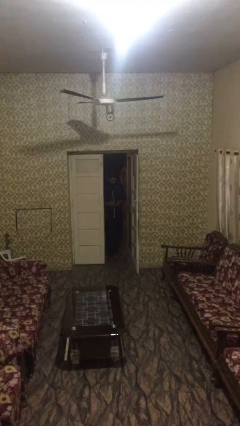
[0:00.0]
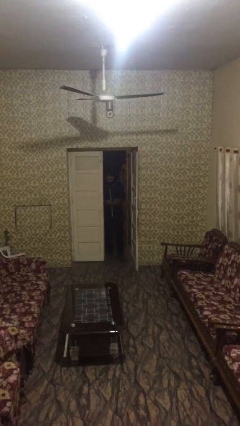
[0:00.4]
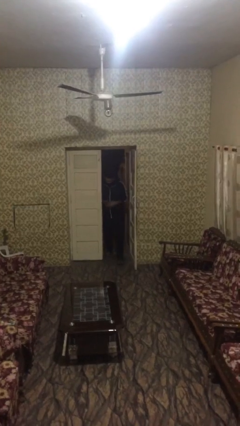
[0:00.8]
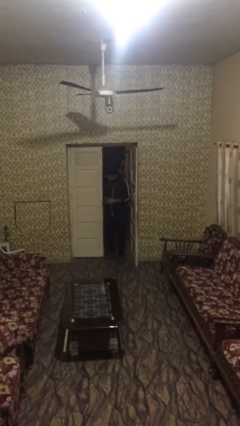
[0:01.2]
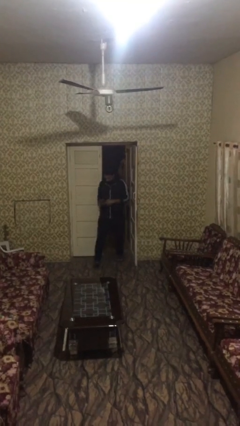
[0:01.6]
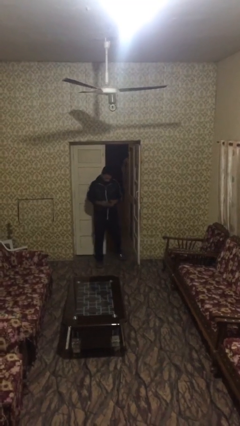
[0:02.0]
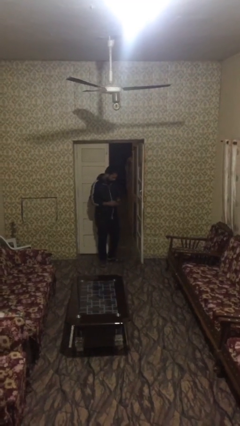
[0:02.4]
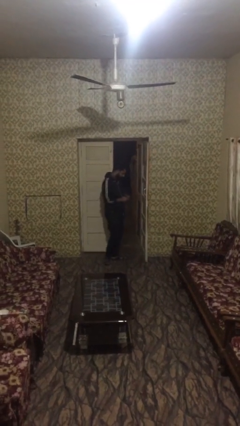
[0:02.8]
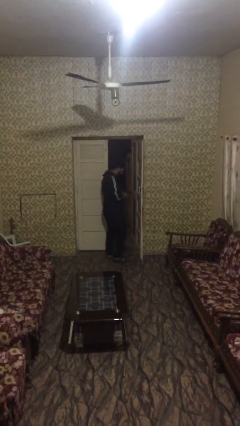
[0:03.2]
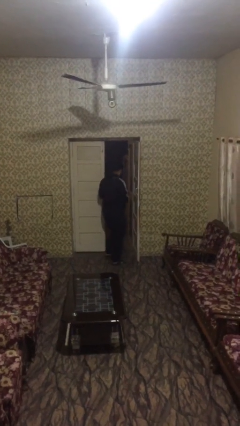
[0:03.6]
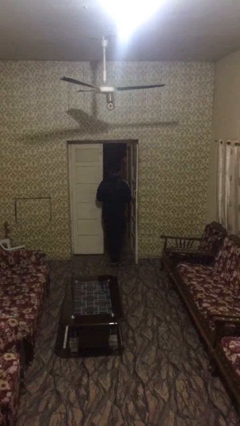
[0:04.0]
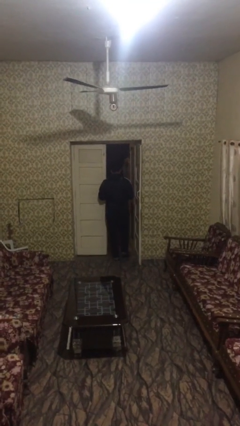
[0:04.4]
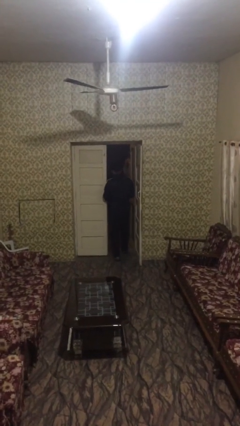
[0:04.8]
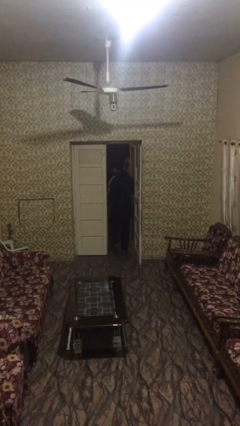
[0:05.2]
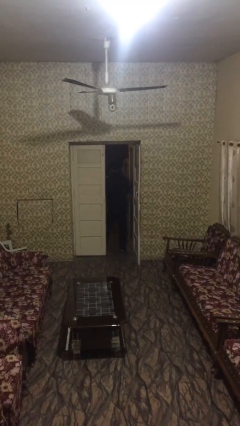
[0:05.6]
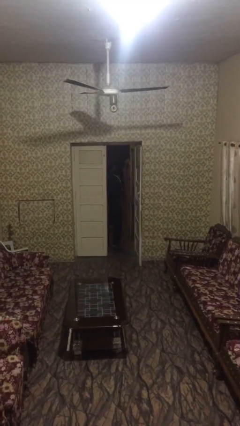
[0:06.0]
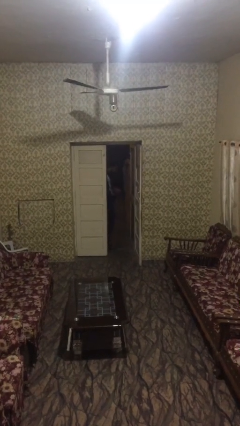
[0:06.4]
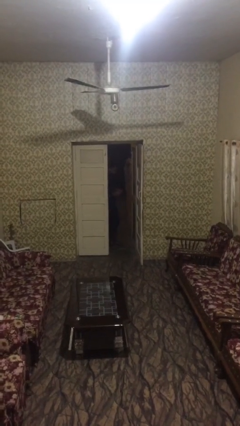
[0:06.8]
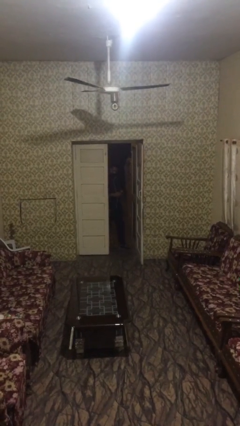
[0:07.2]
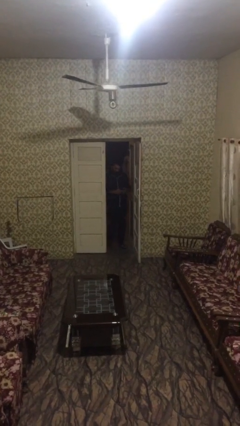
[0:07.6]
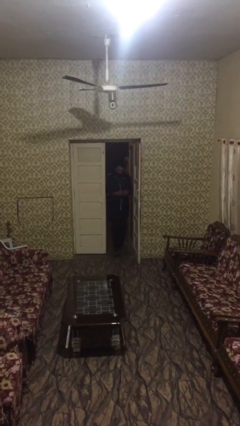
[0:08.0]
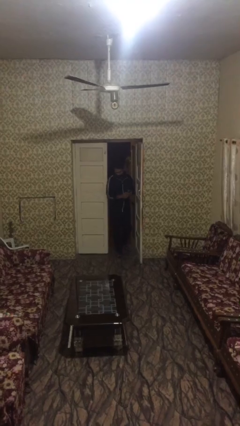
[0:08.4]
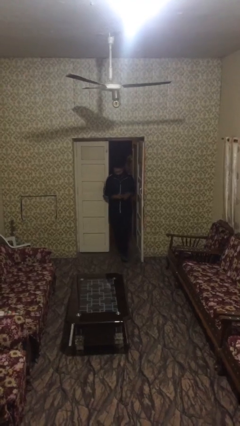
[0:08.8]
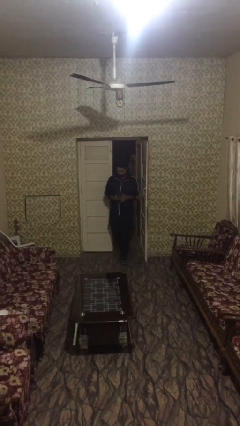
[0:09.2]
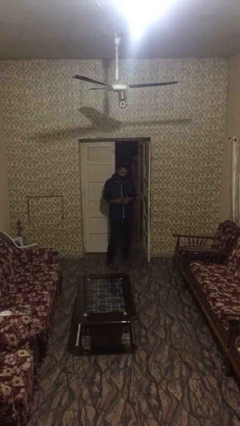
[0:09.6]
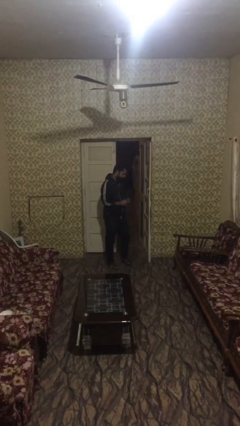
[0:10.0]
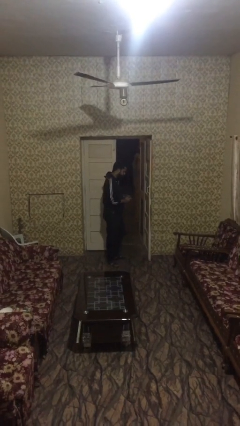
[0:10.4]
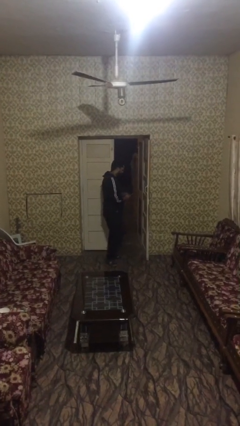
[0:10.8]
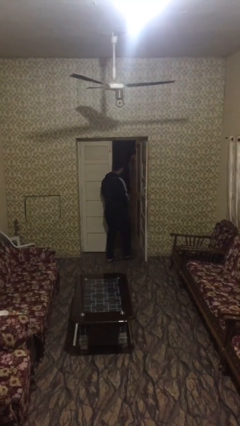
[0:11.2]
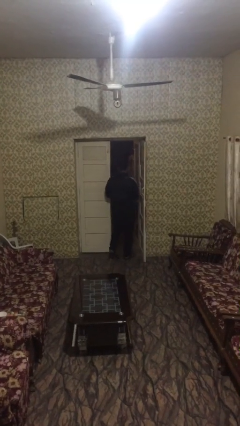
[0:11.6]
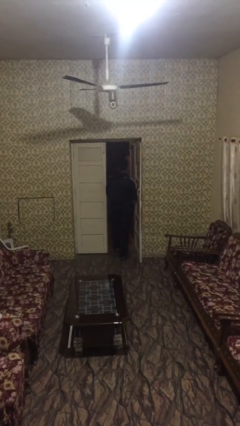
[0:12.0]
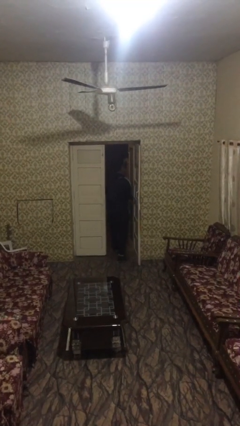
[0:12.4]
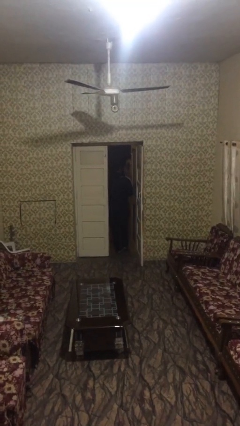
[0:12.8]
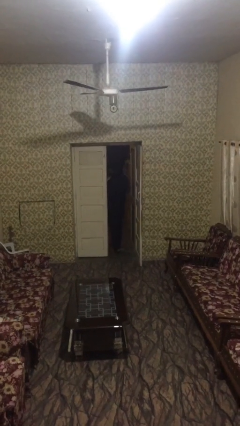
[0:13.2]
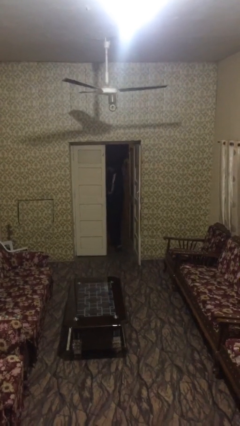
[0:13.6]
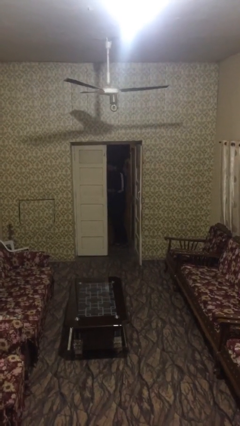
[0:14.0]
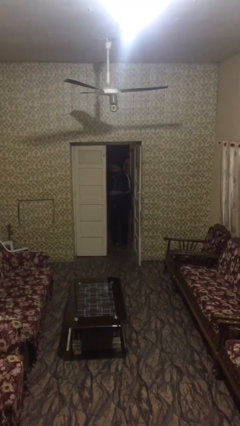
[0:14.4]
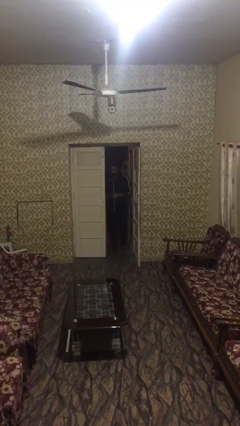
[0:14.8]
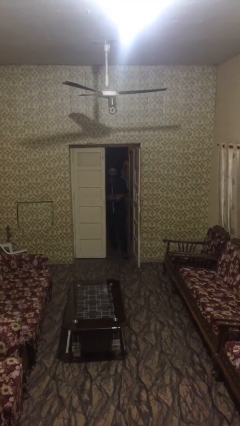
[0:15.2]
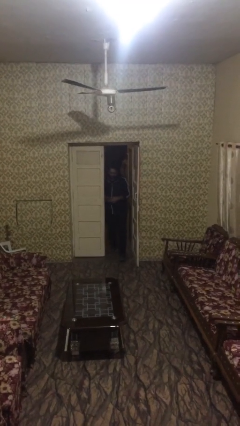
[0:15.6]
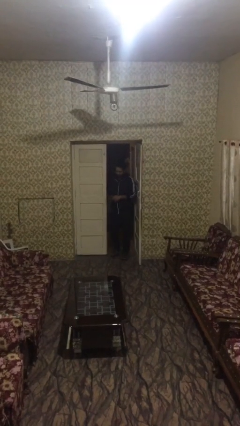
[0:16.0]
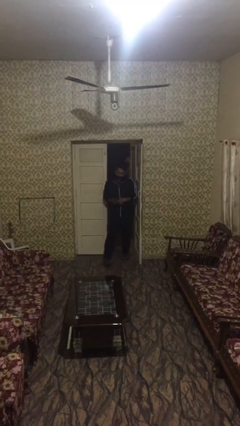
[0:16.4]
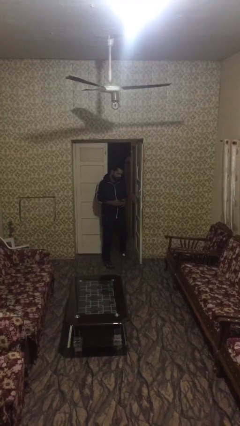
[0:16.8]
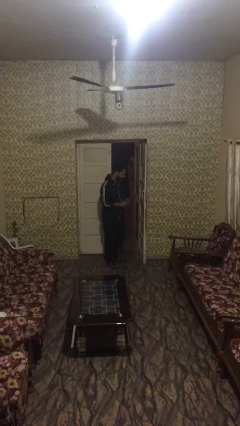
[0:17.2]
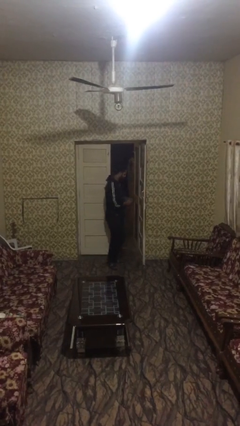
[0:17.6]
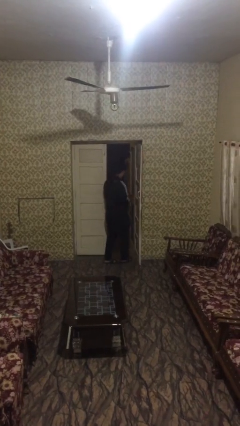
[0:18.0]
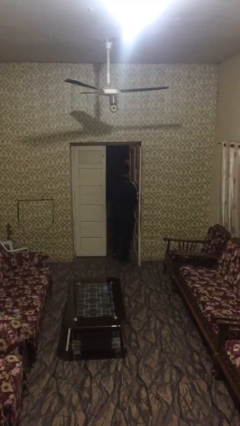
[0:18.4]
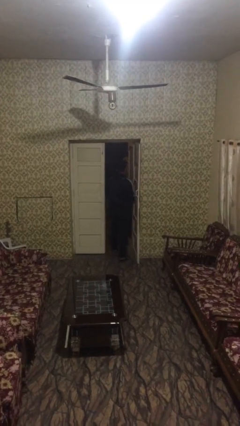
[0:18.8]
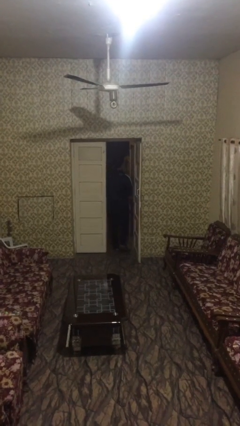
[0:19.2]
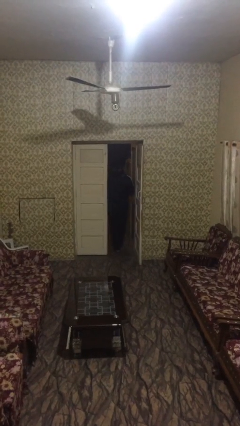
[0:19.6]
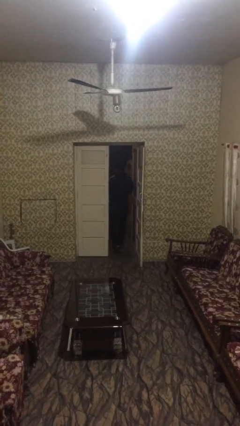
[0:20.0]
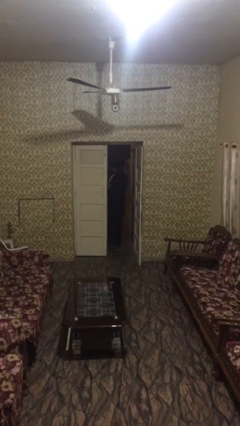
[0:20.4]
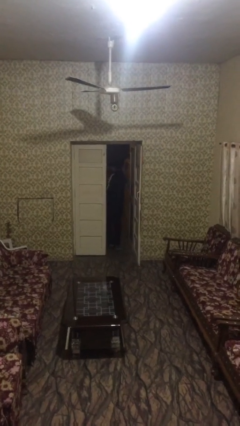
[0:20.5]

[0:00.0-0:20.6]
person texts on phone

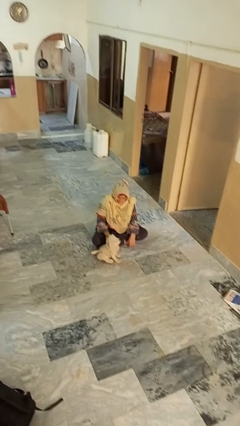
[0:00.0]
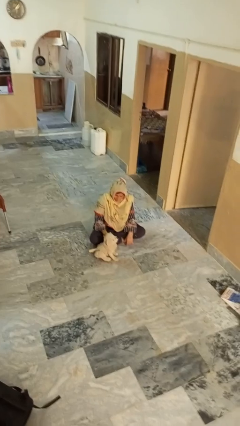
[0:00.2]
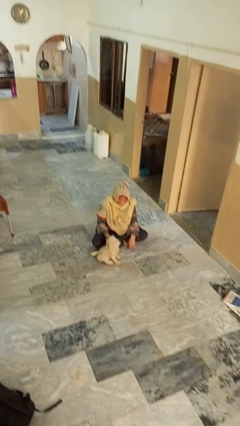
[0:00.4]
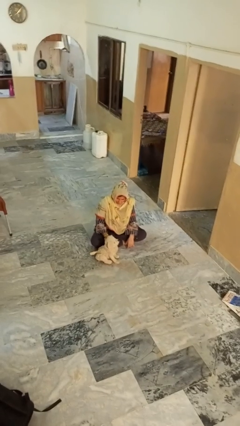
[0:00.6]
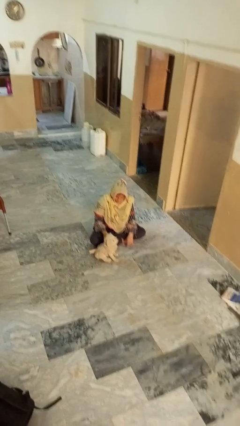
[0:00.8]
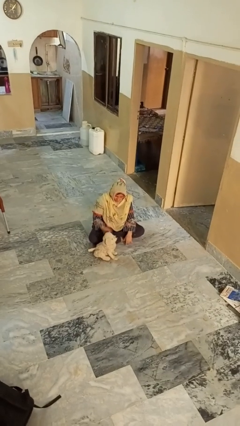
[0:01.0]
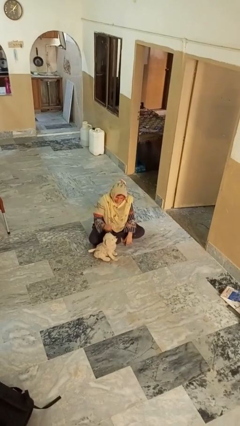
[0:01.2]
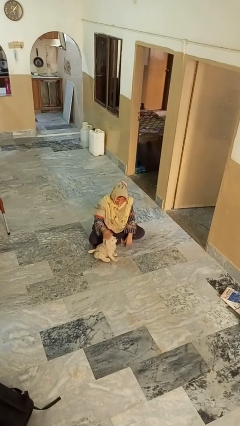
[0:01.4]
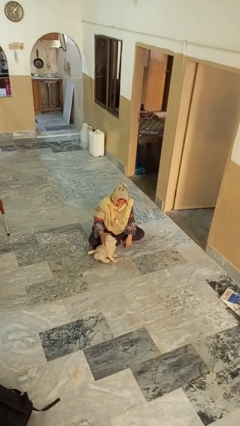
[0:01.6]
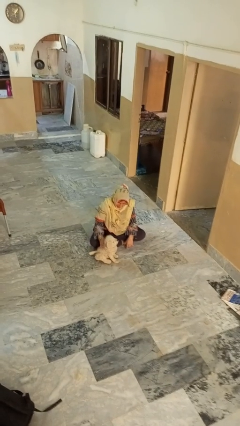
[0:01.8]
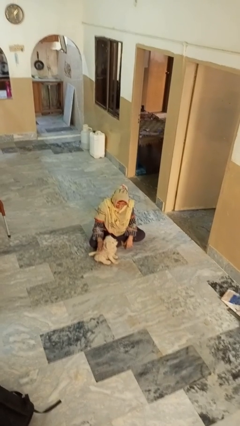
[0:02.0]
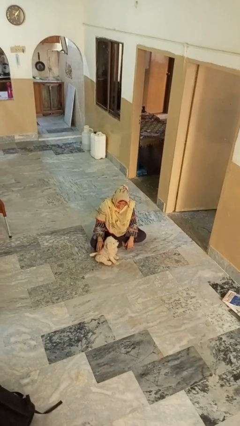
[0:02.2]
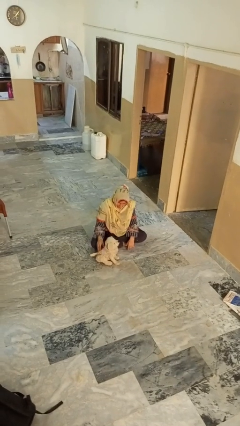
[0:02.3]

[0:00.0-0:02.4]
person pets dog

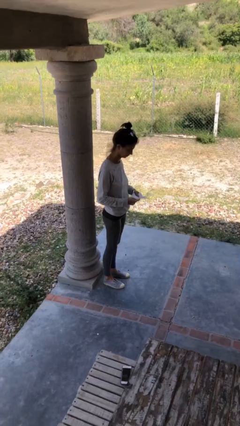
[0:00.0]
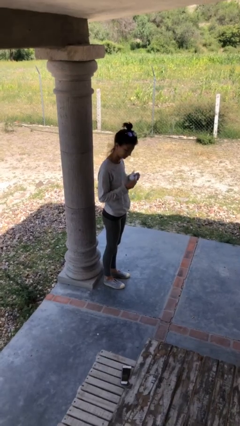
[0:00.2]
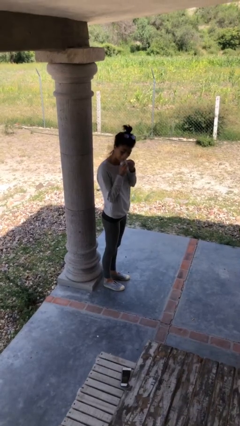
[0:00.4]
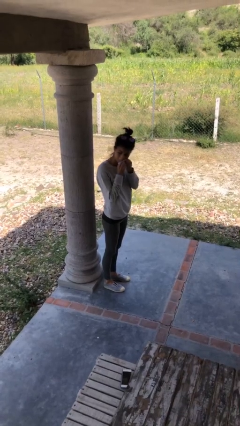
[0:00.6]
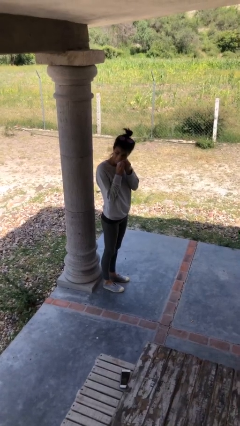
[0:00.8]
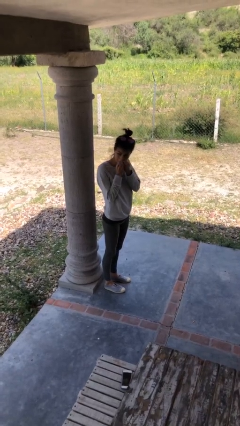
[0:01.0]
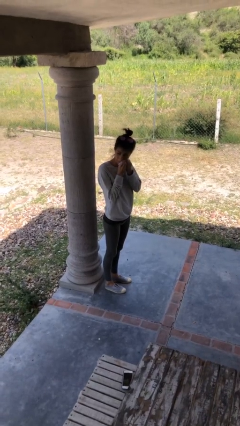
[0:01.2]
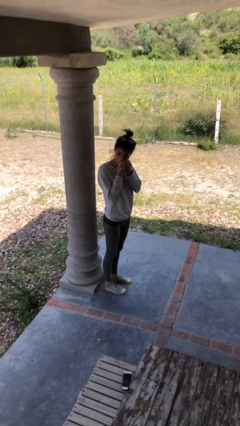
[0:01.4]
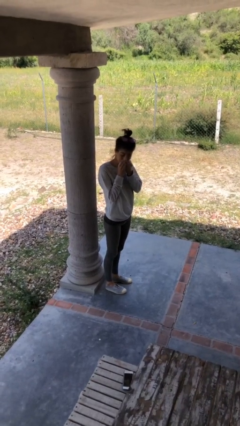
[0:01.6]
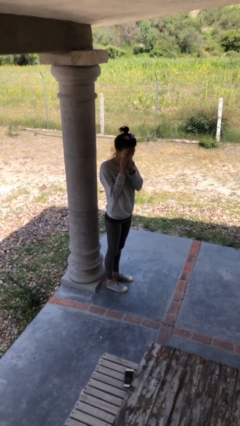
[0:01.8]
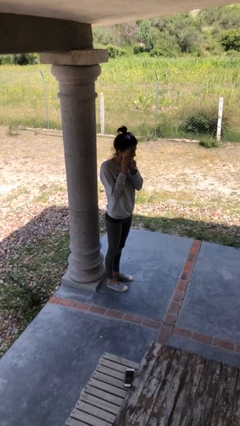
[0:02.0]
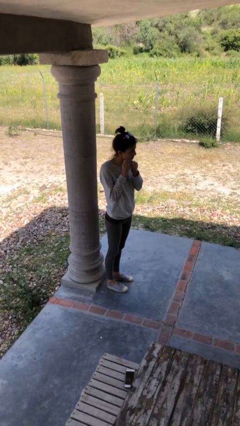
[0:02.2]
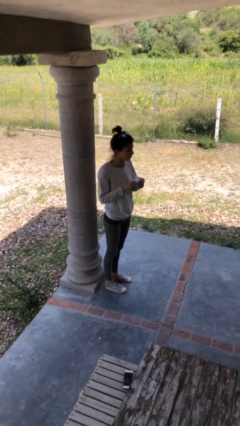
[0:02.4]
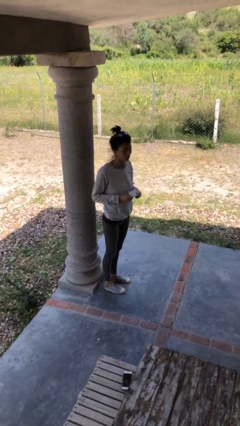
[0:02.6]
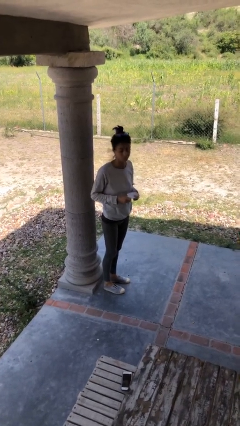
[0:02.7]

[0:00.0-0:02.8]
person wipes mouth with napkin

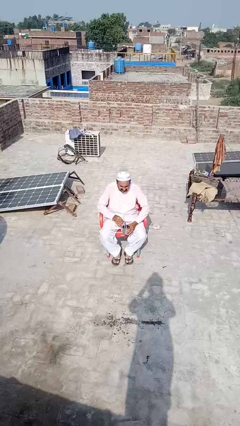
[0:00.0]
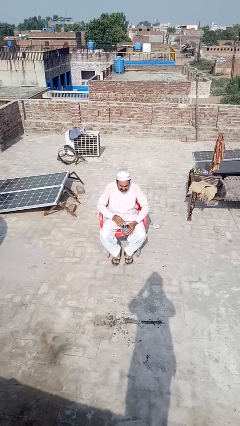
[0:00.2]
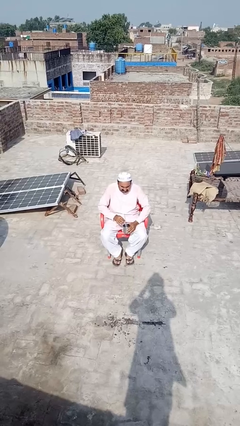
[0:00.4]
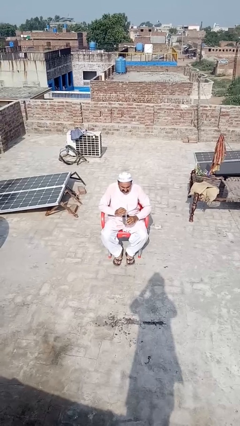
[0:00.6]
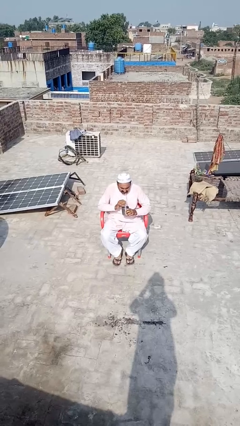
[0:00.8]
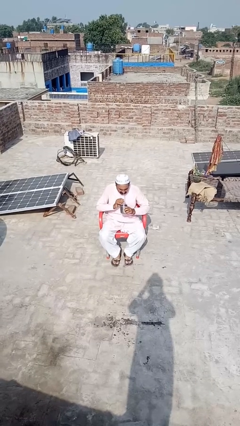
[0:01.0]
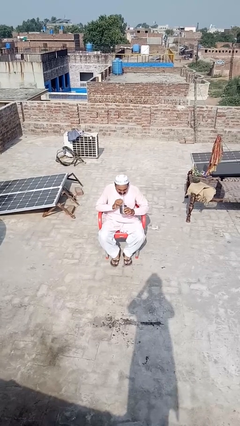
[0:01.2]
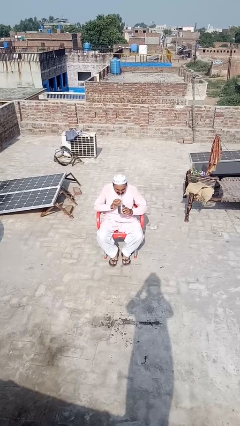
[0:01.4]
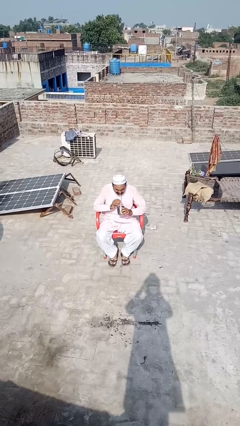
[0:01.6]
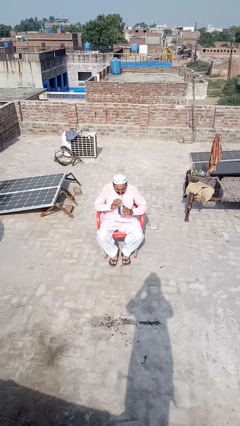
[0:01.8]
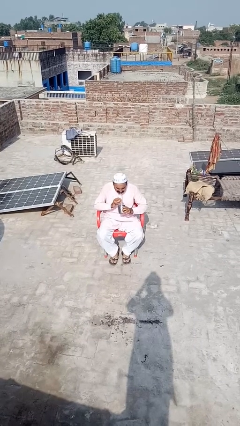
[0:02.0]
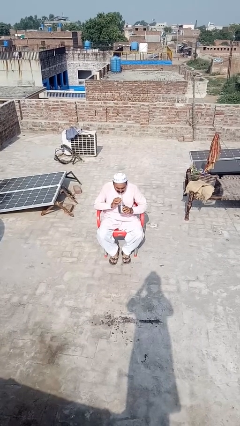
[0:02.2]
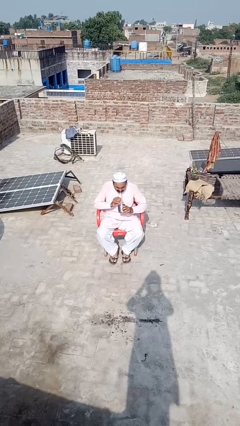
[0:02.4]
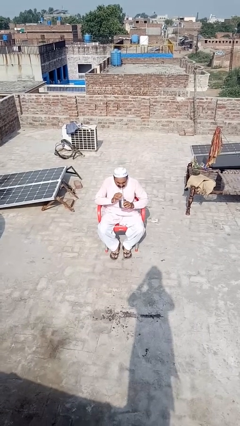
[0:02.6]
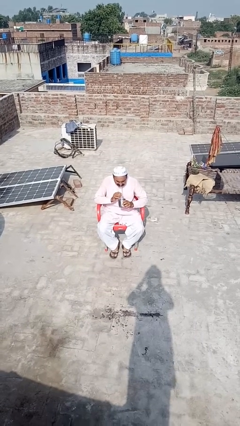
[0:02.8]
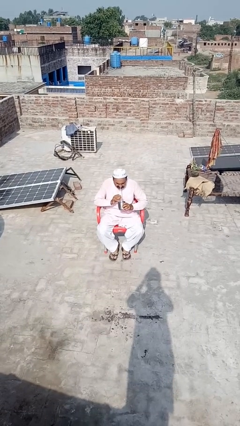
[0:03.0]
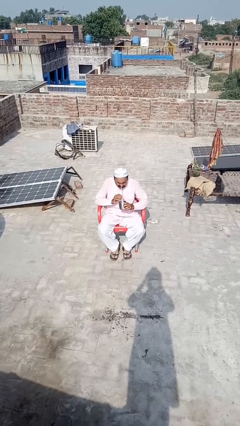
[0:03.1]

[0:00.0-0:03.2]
person drinks from straw
